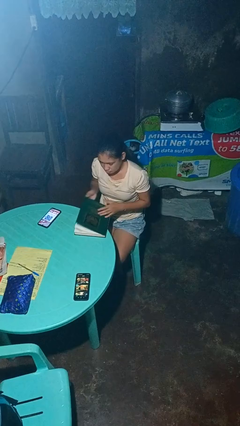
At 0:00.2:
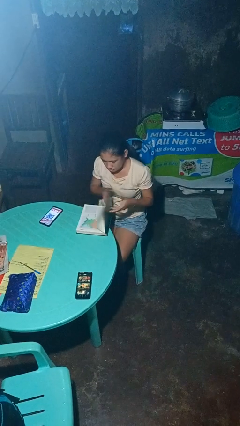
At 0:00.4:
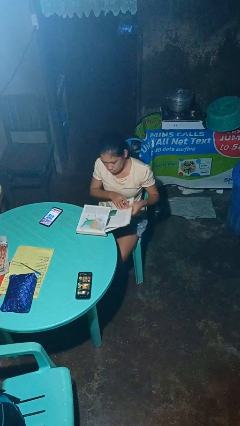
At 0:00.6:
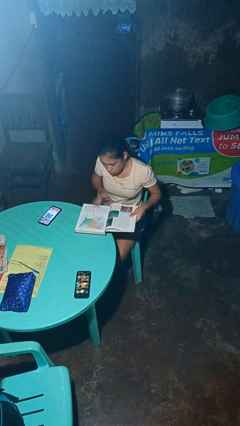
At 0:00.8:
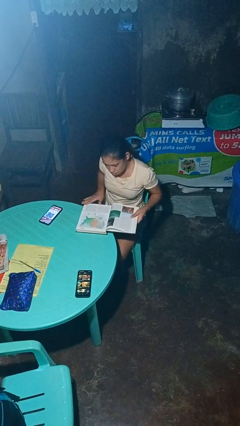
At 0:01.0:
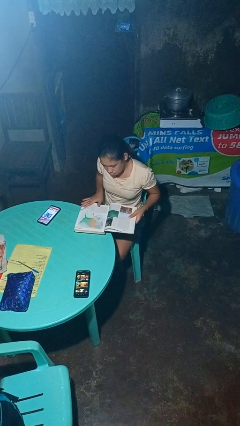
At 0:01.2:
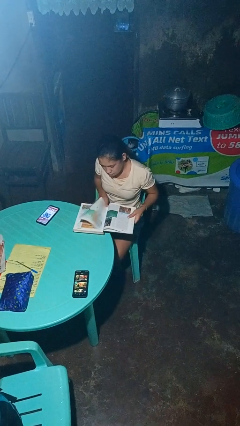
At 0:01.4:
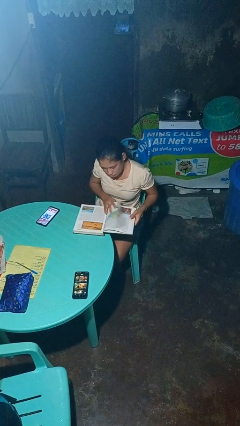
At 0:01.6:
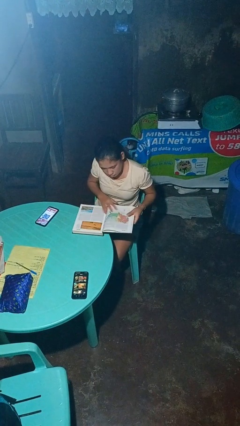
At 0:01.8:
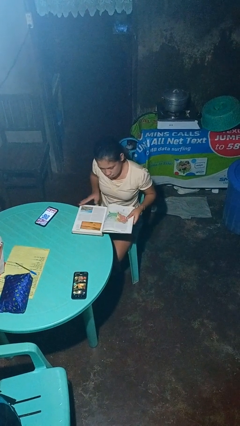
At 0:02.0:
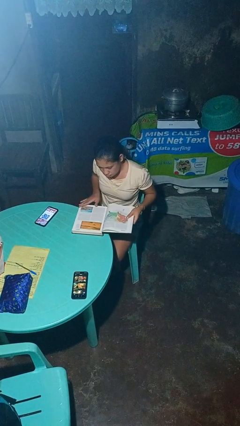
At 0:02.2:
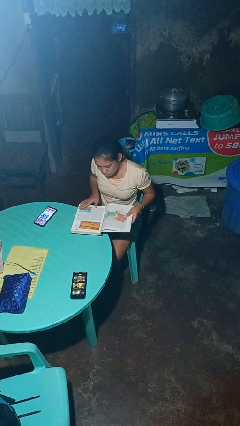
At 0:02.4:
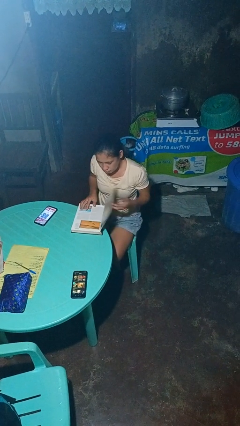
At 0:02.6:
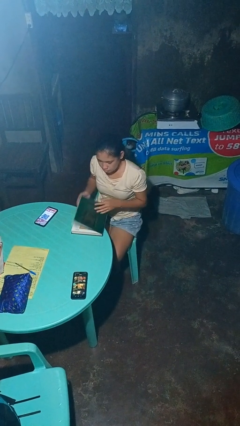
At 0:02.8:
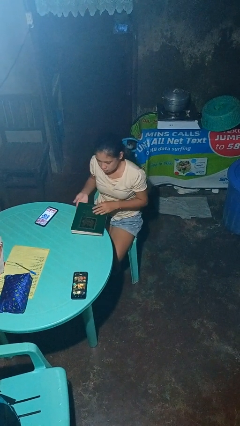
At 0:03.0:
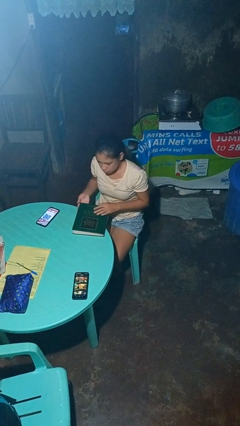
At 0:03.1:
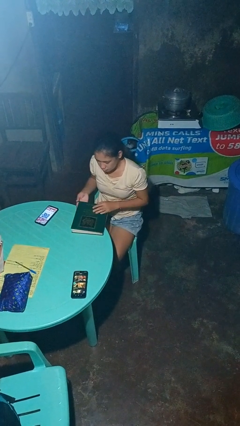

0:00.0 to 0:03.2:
person reads book

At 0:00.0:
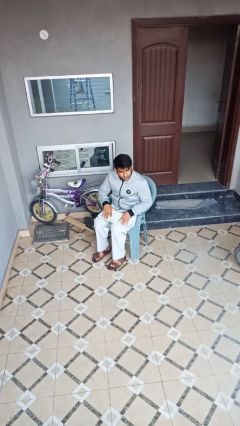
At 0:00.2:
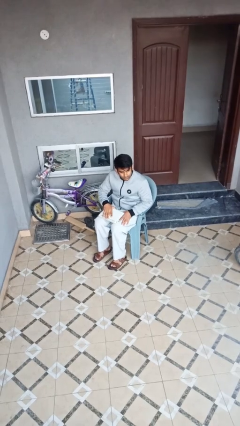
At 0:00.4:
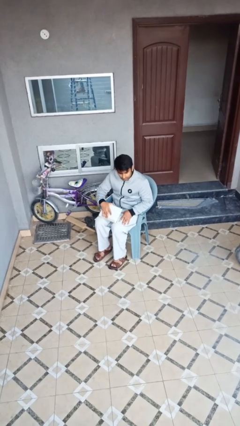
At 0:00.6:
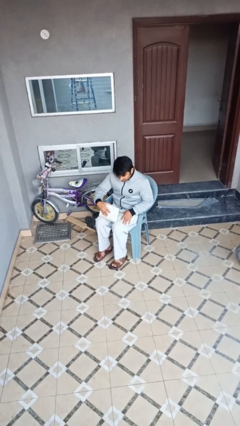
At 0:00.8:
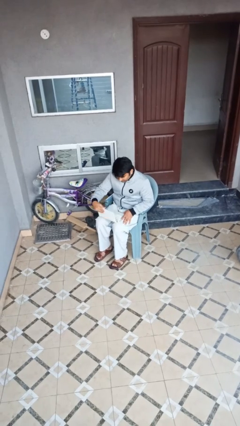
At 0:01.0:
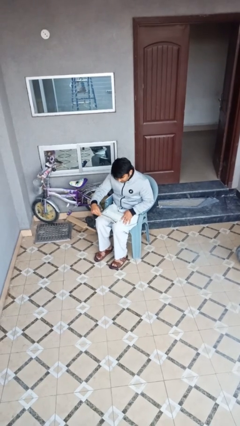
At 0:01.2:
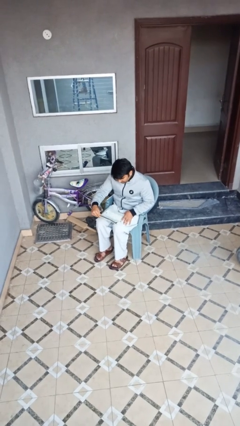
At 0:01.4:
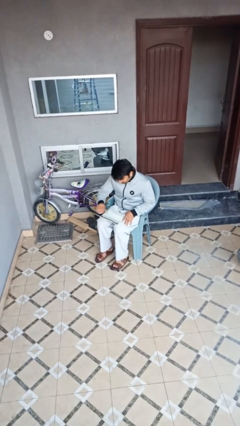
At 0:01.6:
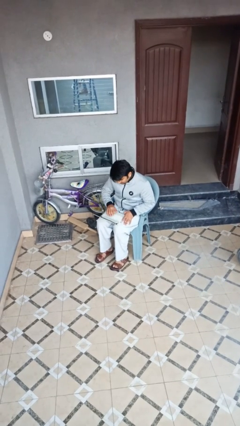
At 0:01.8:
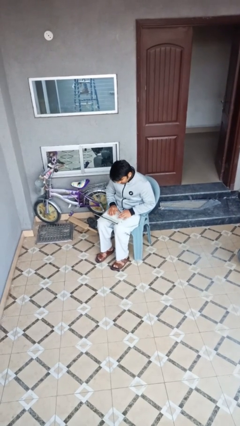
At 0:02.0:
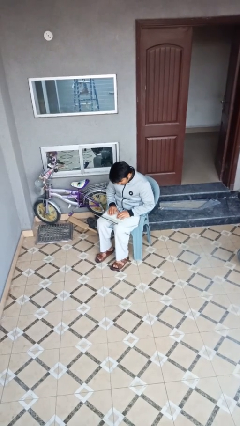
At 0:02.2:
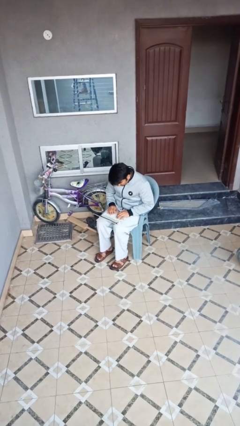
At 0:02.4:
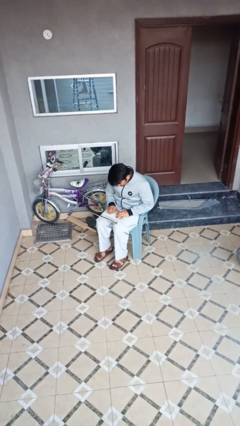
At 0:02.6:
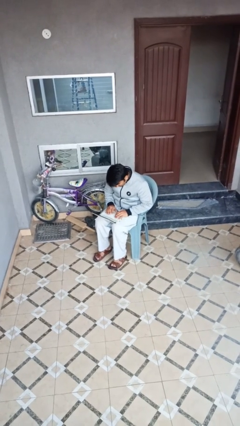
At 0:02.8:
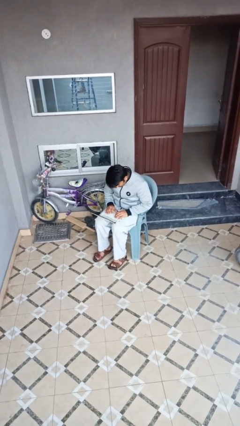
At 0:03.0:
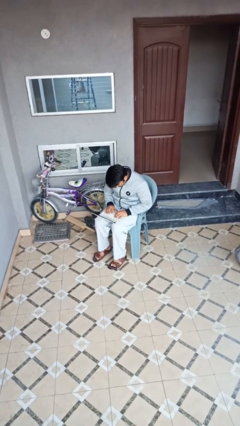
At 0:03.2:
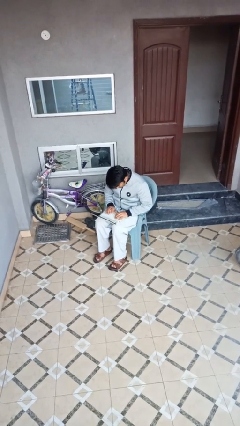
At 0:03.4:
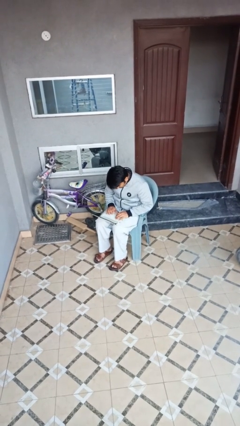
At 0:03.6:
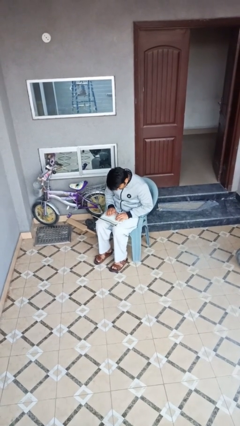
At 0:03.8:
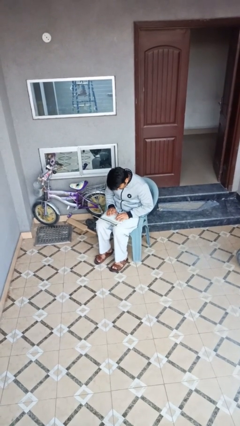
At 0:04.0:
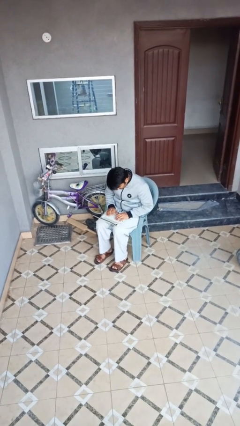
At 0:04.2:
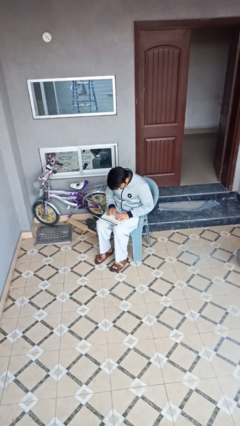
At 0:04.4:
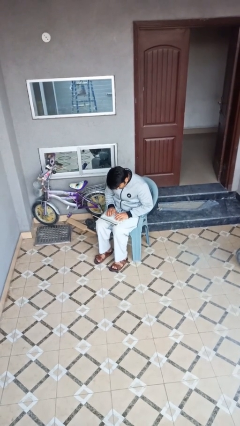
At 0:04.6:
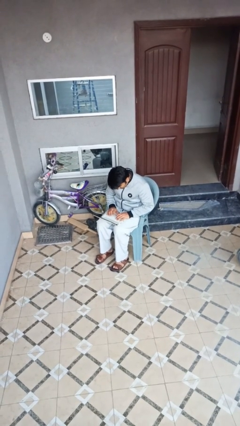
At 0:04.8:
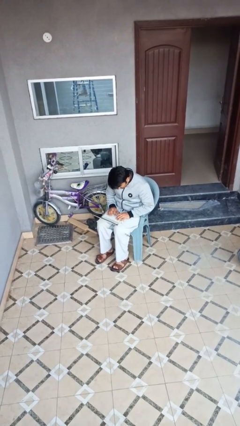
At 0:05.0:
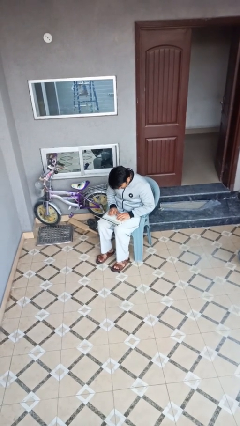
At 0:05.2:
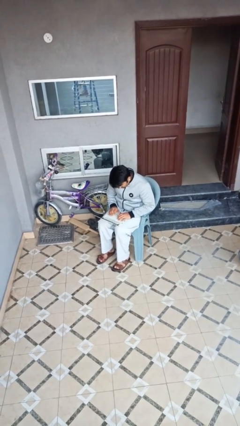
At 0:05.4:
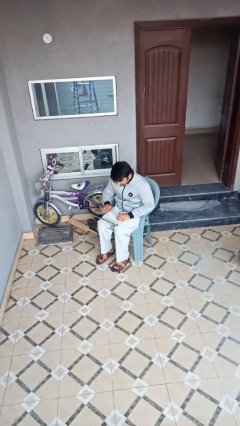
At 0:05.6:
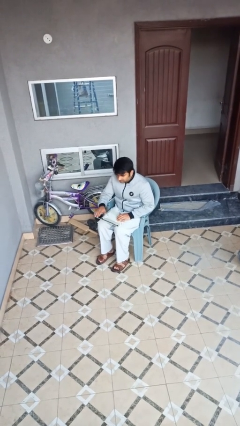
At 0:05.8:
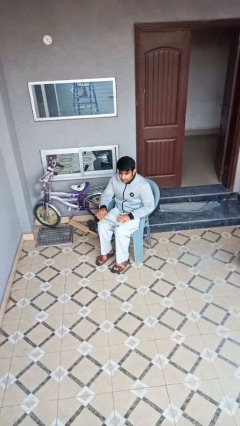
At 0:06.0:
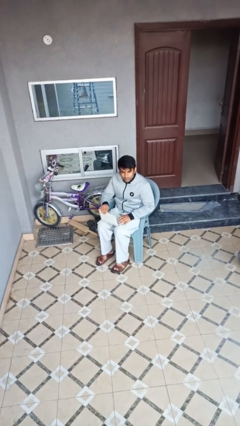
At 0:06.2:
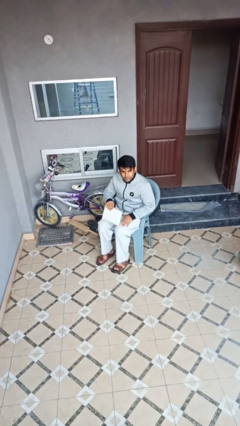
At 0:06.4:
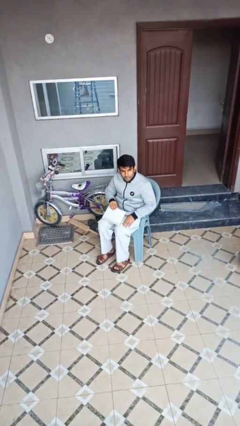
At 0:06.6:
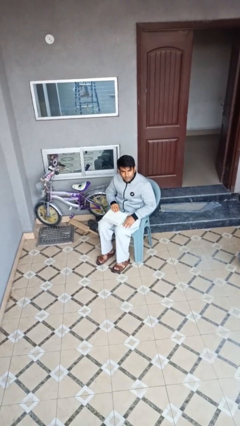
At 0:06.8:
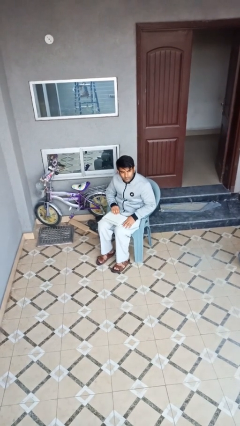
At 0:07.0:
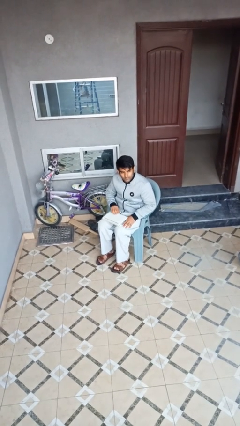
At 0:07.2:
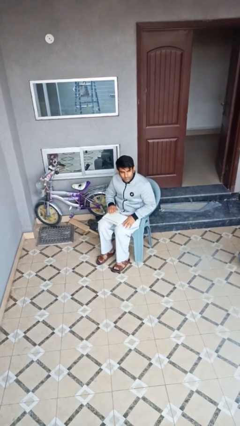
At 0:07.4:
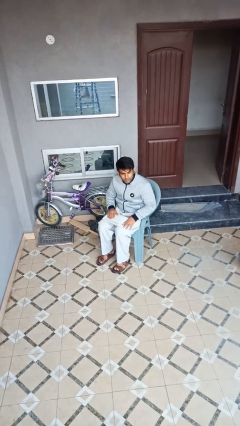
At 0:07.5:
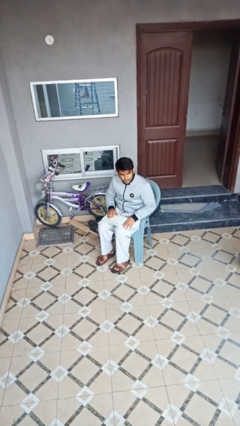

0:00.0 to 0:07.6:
person interacts with laptop

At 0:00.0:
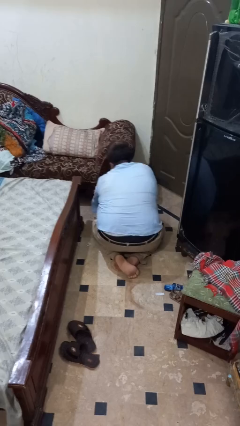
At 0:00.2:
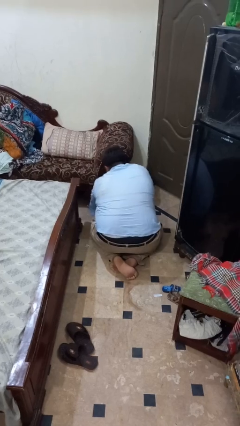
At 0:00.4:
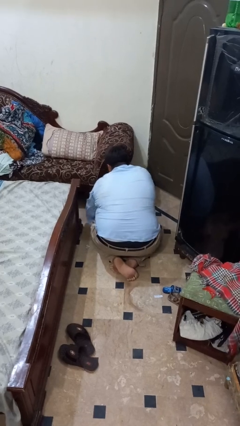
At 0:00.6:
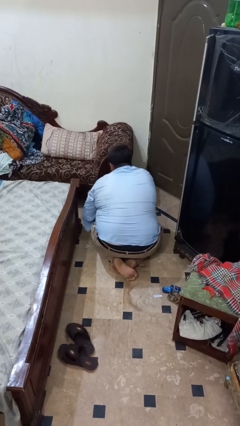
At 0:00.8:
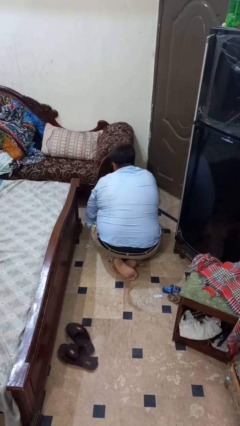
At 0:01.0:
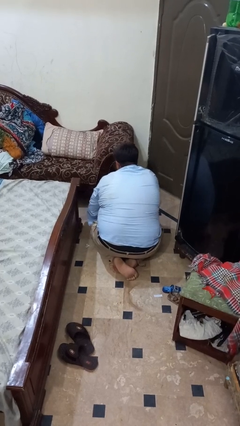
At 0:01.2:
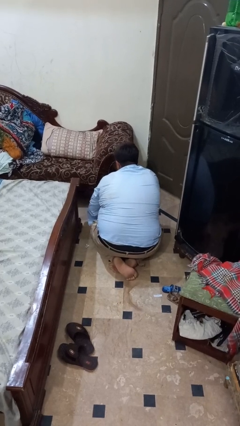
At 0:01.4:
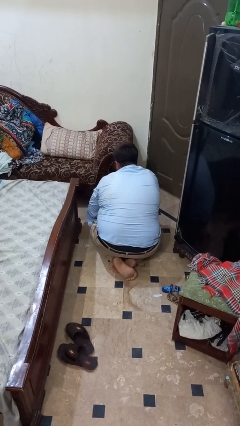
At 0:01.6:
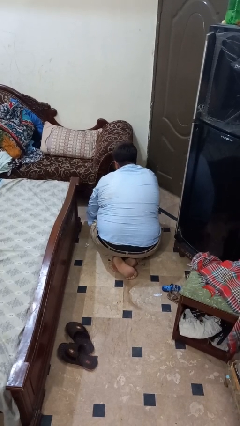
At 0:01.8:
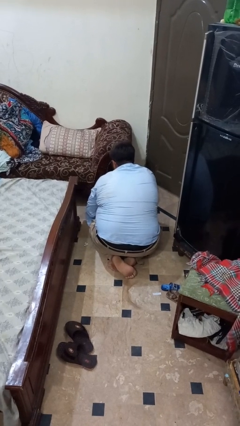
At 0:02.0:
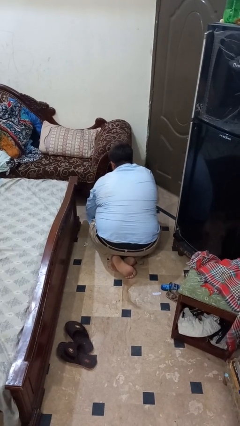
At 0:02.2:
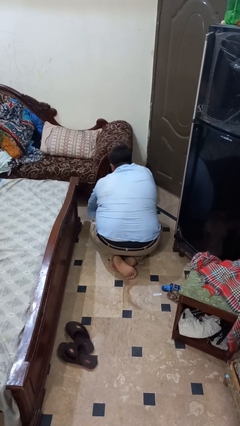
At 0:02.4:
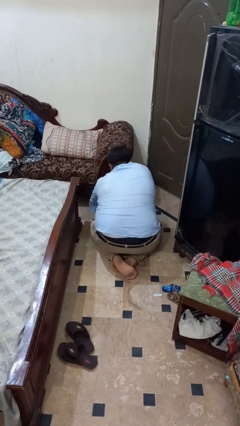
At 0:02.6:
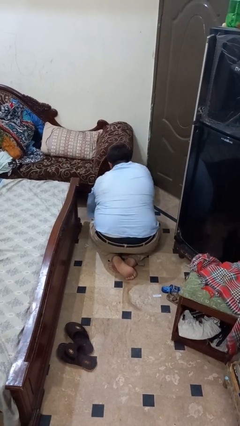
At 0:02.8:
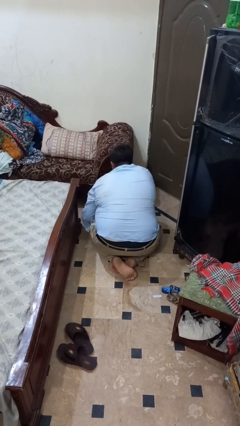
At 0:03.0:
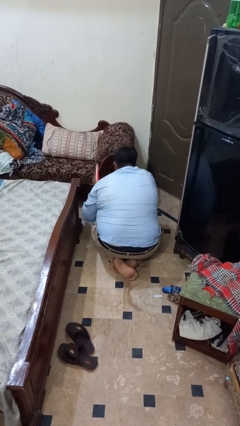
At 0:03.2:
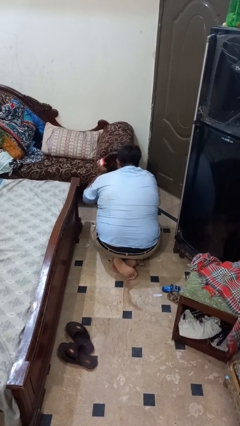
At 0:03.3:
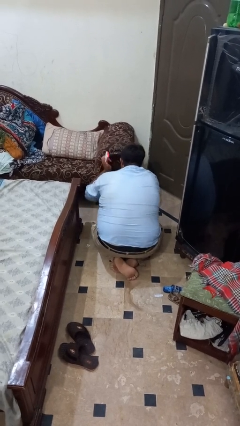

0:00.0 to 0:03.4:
person searches under couch

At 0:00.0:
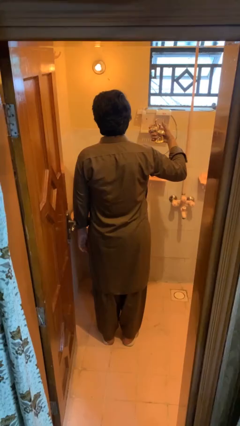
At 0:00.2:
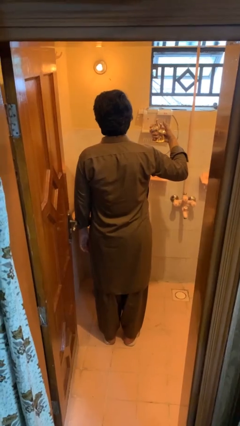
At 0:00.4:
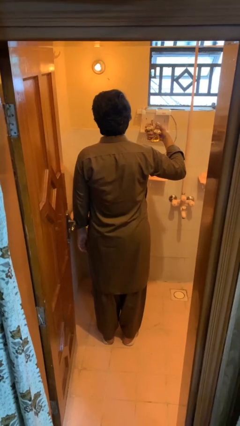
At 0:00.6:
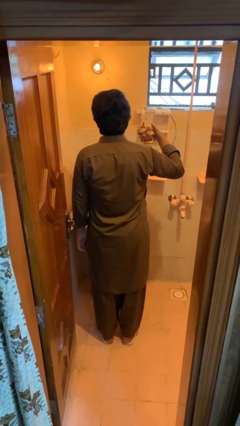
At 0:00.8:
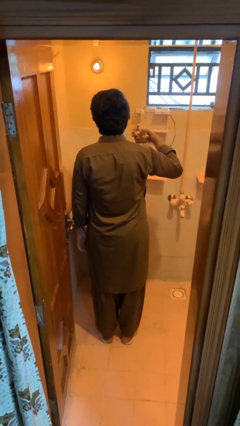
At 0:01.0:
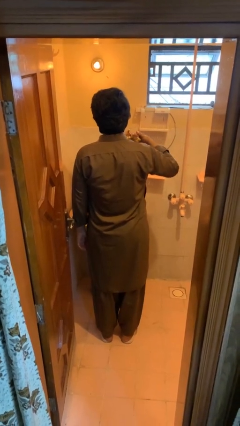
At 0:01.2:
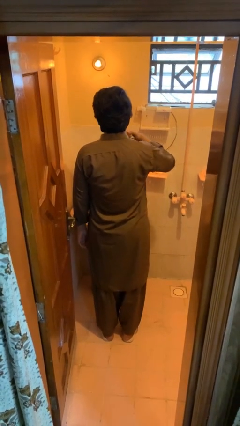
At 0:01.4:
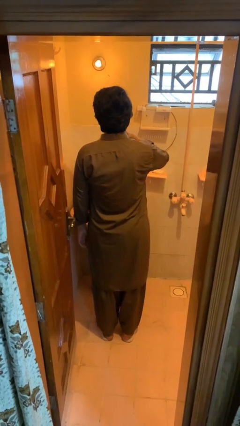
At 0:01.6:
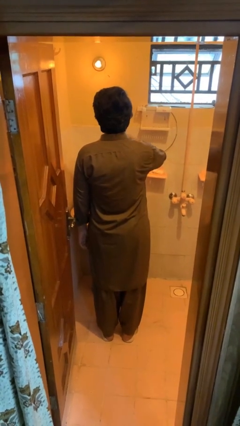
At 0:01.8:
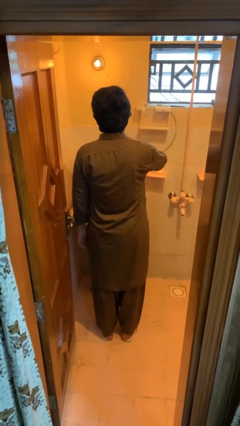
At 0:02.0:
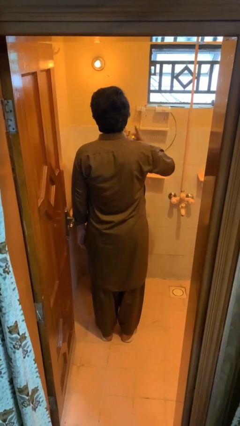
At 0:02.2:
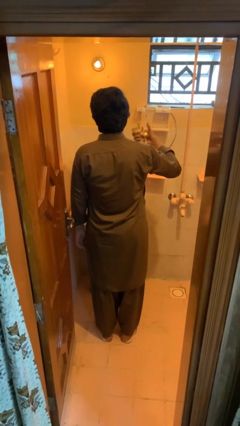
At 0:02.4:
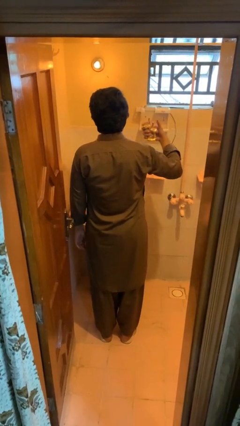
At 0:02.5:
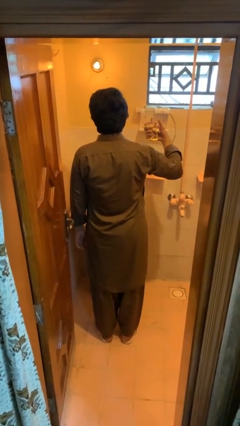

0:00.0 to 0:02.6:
person applies deodorant

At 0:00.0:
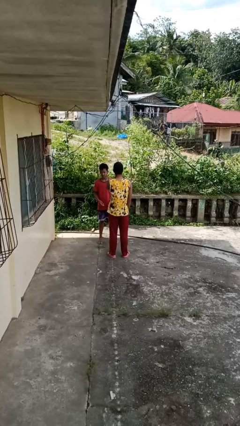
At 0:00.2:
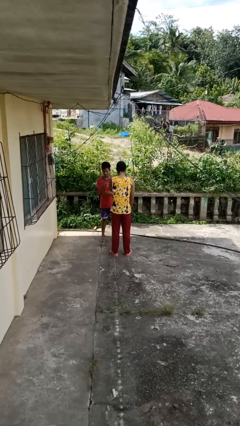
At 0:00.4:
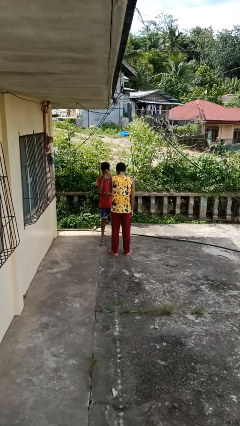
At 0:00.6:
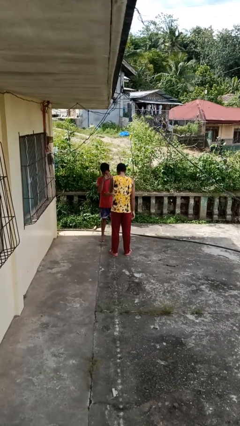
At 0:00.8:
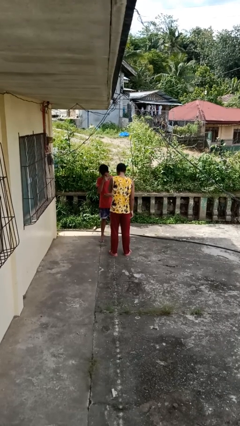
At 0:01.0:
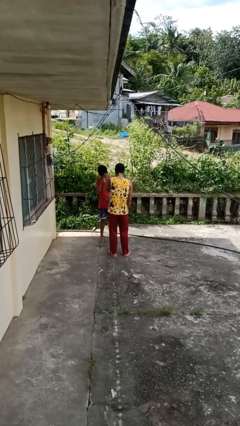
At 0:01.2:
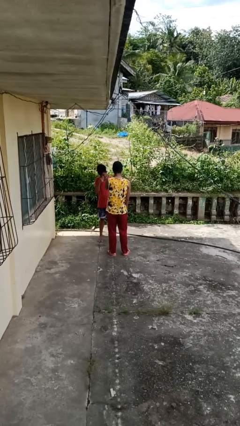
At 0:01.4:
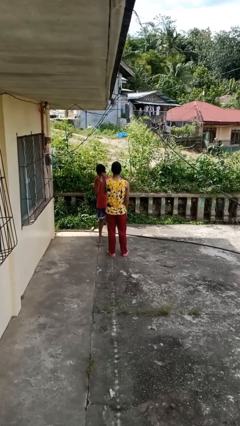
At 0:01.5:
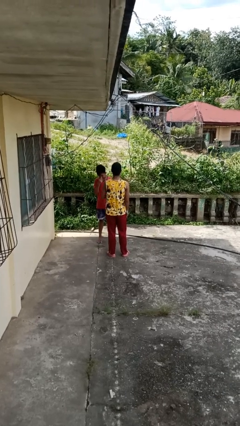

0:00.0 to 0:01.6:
person laughs with person
